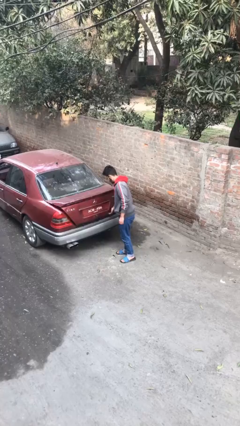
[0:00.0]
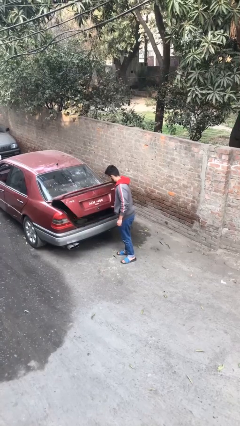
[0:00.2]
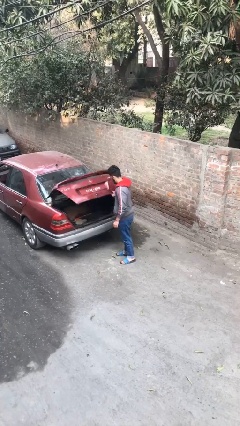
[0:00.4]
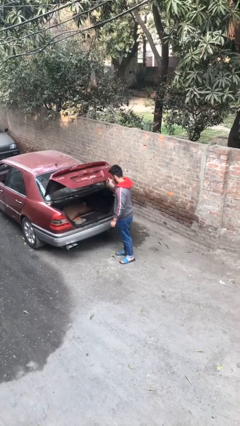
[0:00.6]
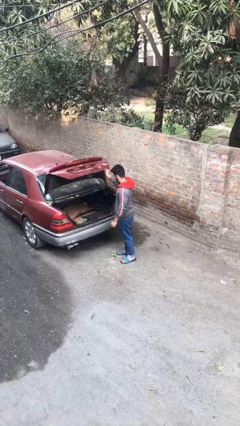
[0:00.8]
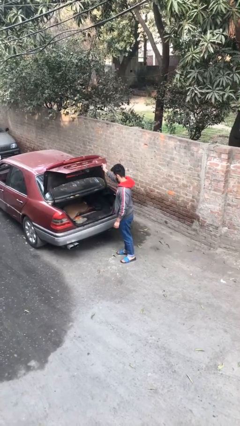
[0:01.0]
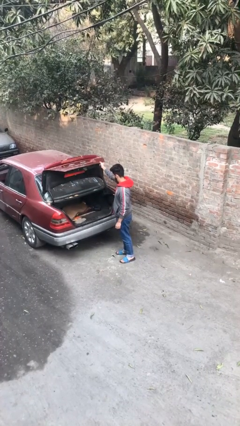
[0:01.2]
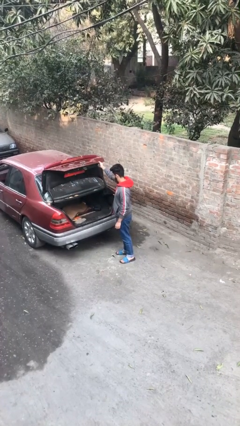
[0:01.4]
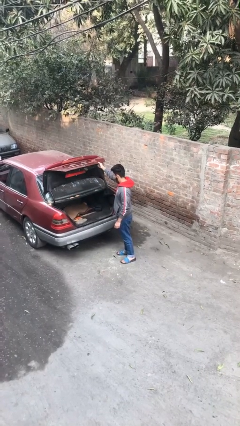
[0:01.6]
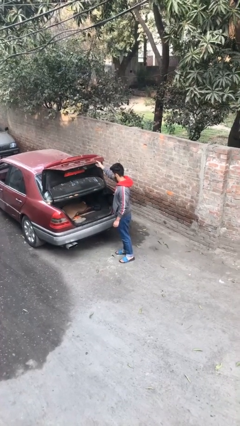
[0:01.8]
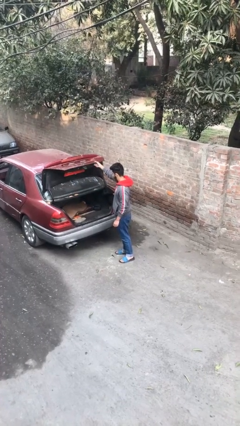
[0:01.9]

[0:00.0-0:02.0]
person opens car trunk

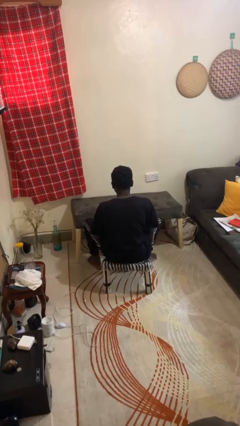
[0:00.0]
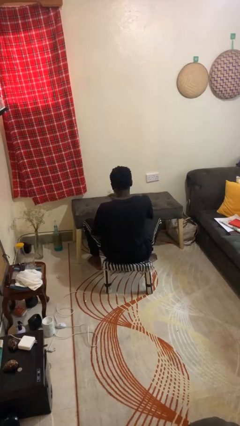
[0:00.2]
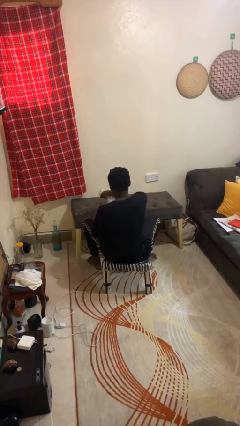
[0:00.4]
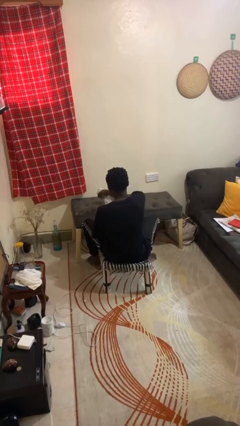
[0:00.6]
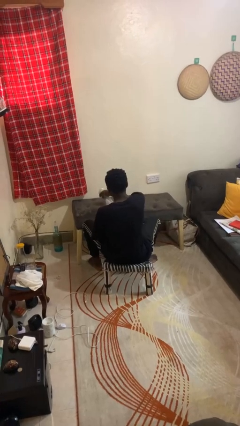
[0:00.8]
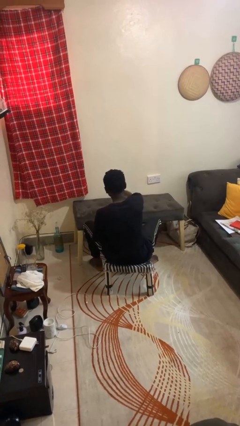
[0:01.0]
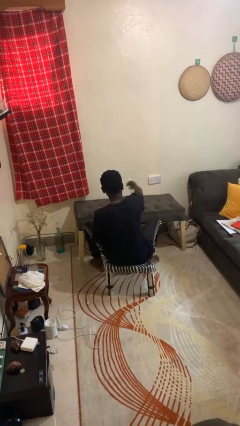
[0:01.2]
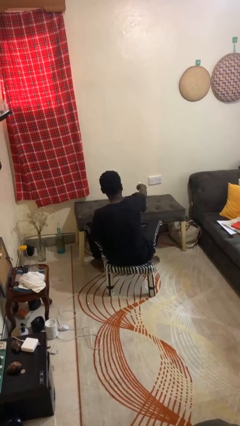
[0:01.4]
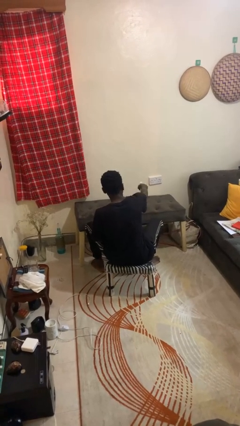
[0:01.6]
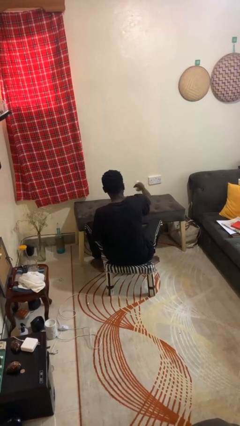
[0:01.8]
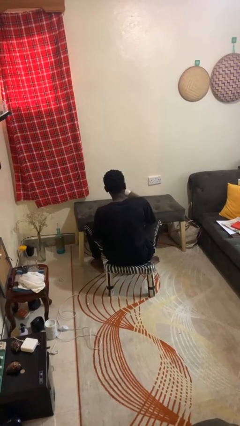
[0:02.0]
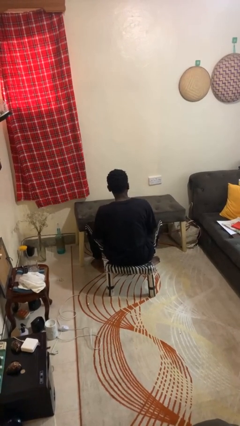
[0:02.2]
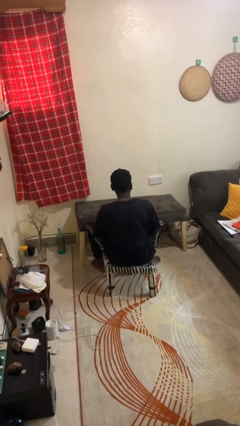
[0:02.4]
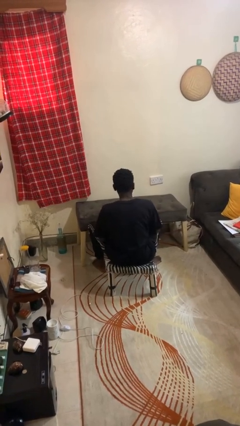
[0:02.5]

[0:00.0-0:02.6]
person sprays from bottle

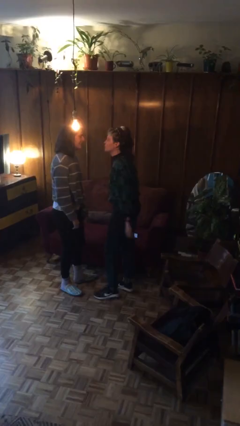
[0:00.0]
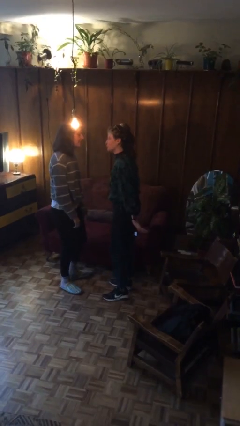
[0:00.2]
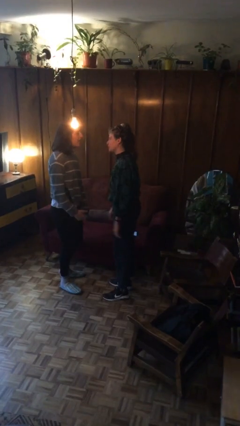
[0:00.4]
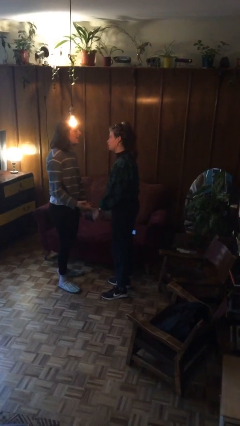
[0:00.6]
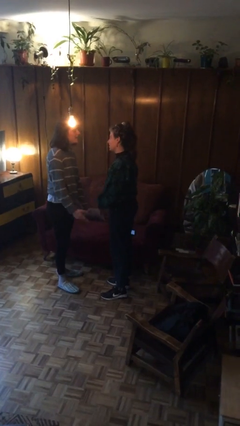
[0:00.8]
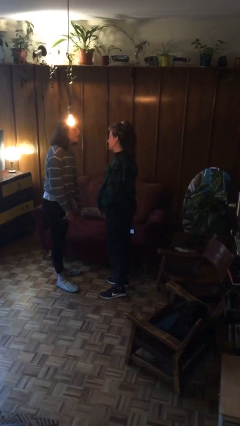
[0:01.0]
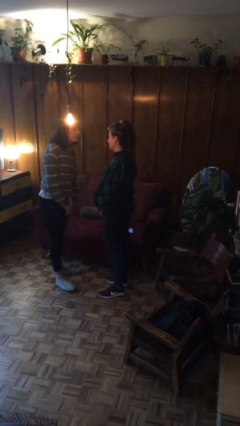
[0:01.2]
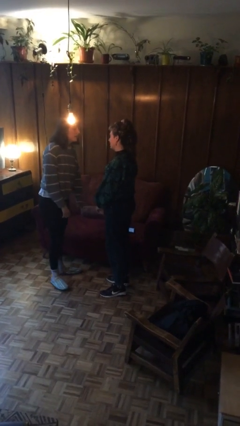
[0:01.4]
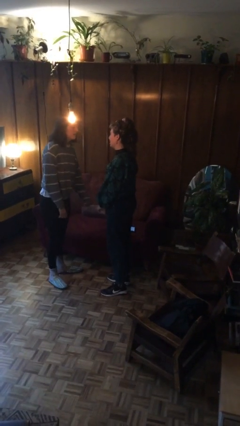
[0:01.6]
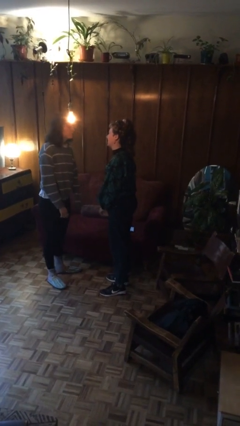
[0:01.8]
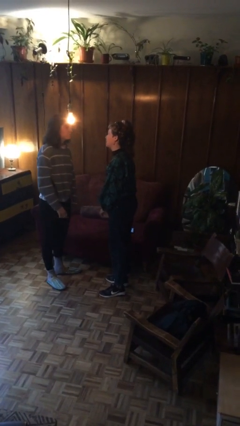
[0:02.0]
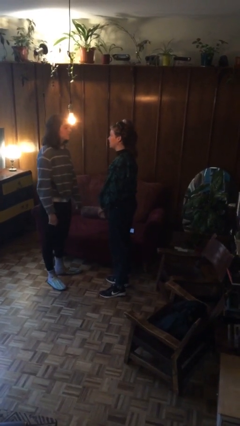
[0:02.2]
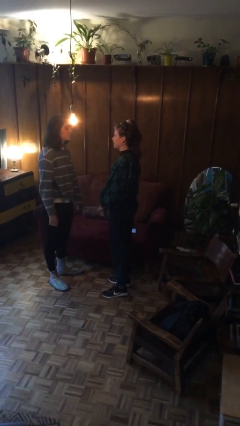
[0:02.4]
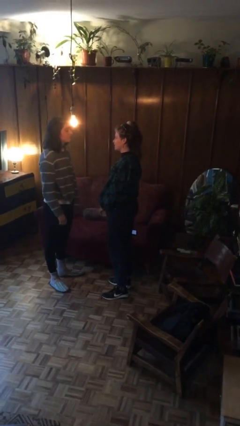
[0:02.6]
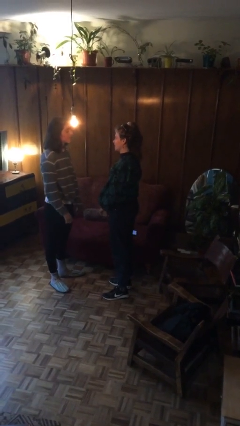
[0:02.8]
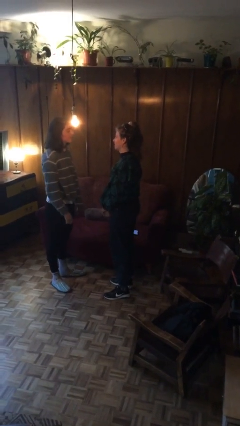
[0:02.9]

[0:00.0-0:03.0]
person talks to person

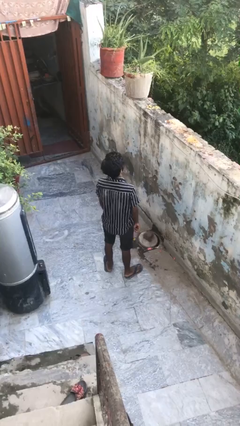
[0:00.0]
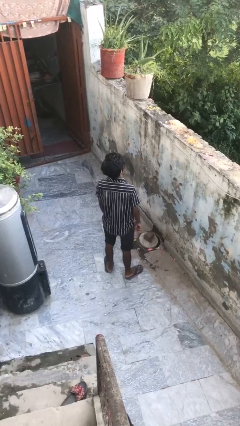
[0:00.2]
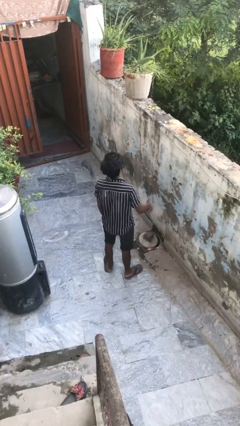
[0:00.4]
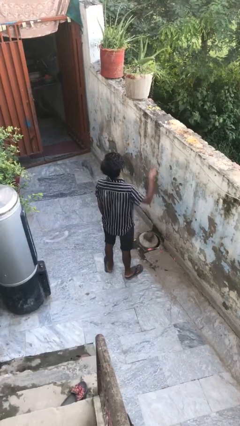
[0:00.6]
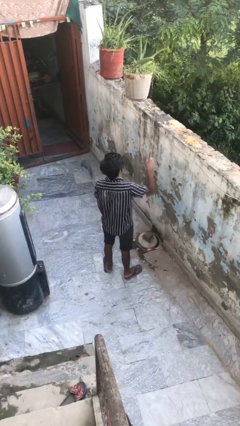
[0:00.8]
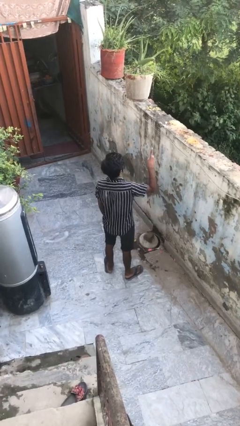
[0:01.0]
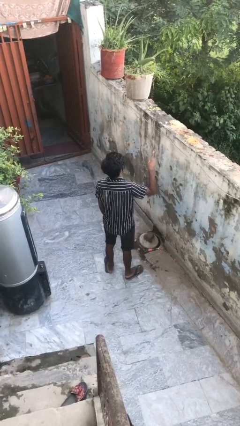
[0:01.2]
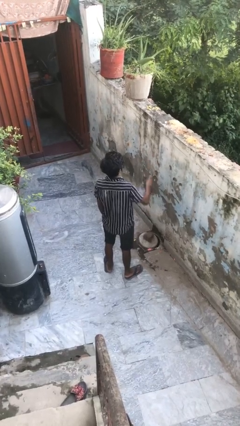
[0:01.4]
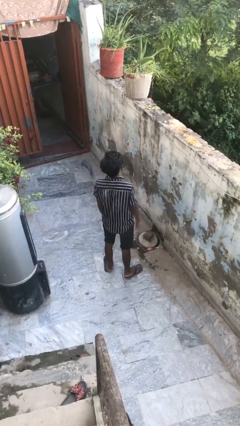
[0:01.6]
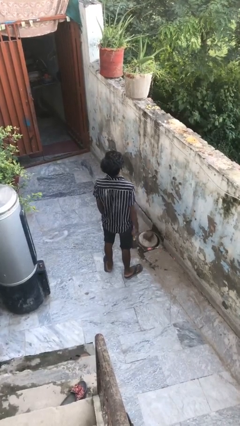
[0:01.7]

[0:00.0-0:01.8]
person gestures number one

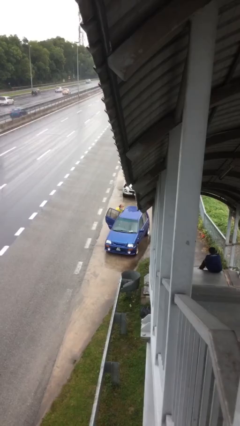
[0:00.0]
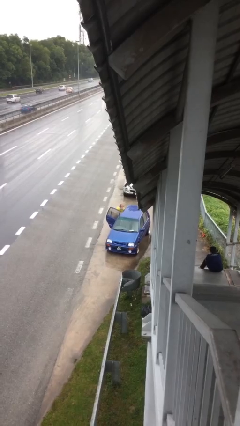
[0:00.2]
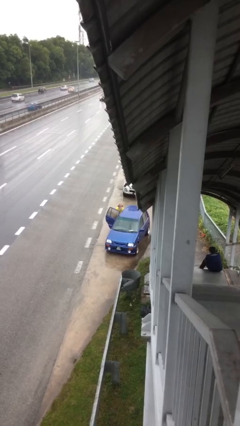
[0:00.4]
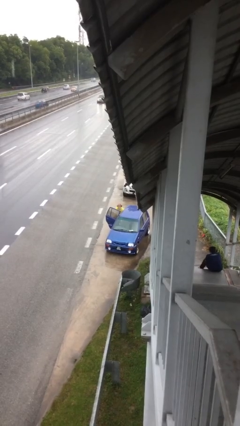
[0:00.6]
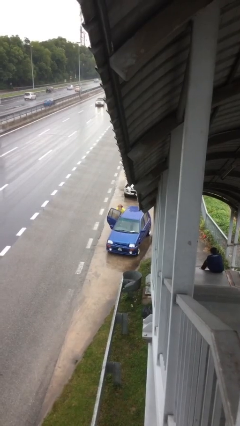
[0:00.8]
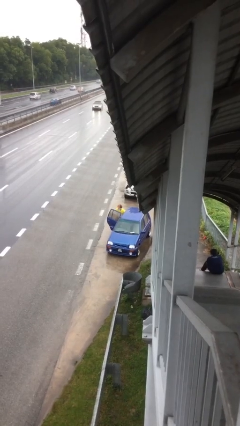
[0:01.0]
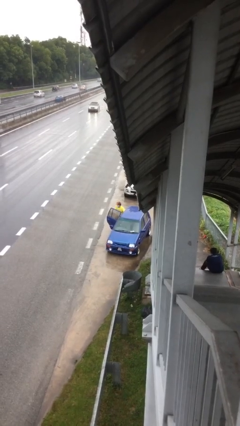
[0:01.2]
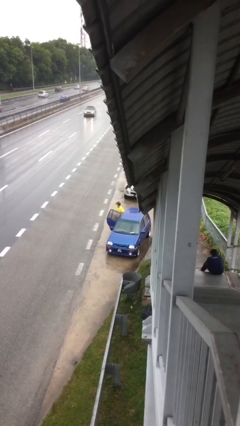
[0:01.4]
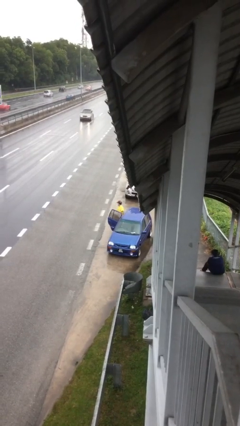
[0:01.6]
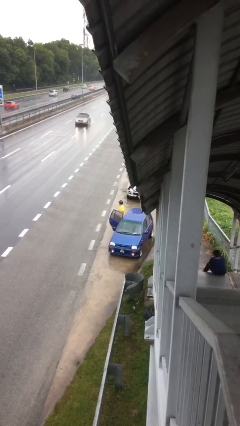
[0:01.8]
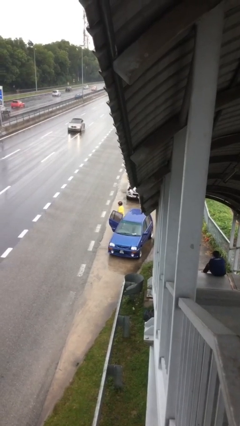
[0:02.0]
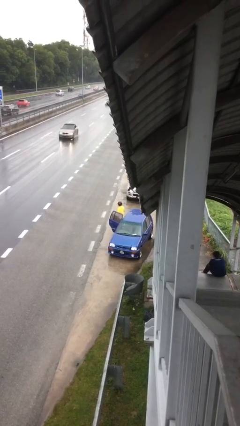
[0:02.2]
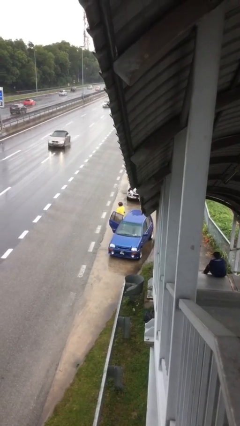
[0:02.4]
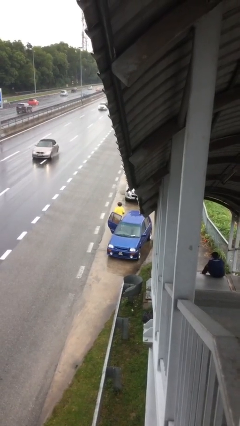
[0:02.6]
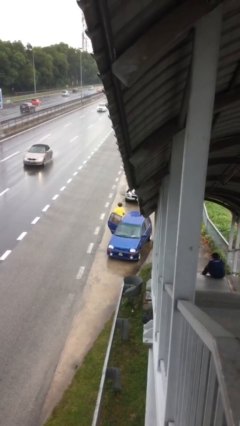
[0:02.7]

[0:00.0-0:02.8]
person unloads car

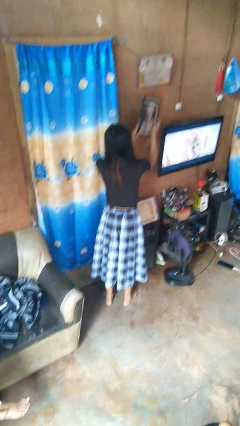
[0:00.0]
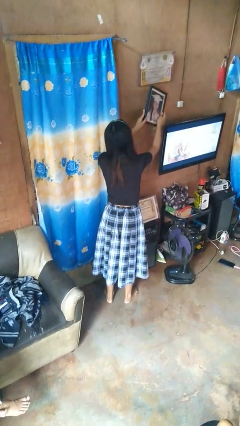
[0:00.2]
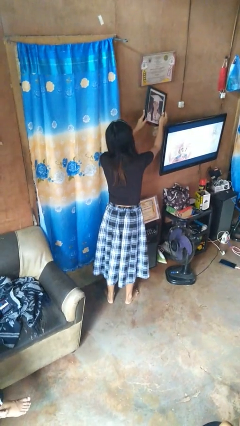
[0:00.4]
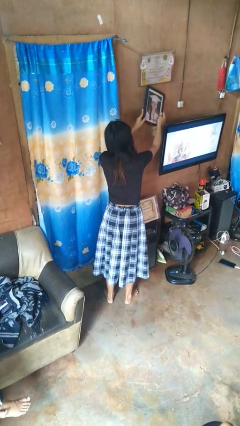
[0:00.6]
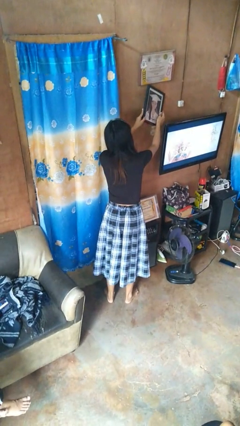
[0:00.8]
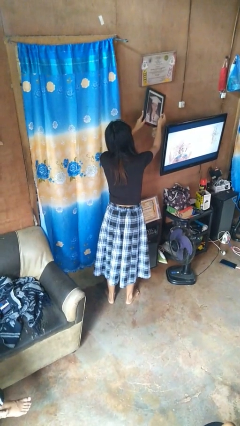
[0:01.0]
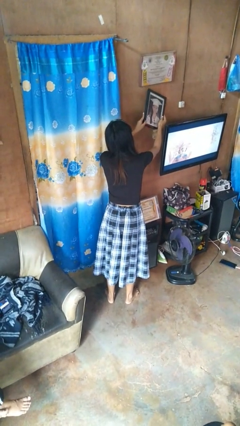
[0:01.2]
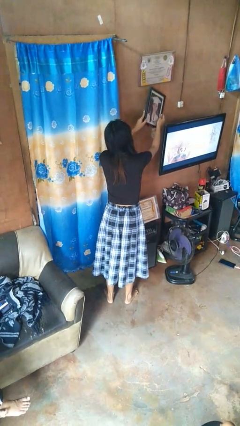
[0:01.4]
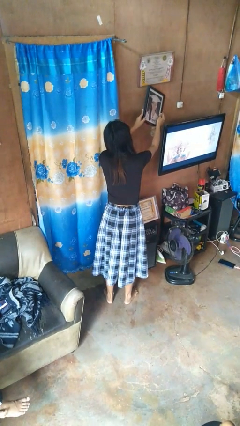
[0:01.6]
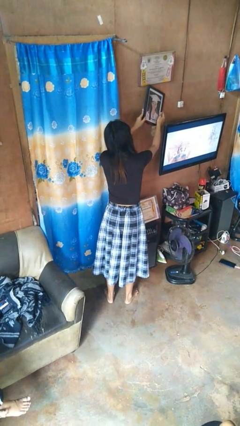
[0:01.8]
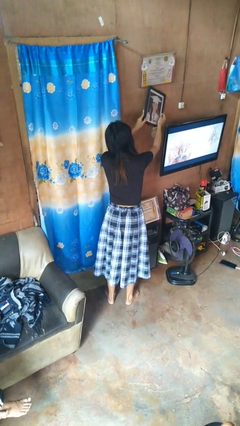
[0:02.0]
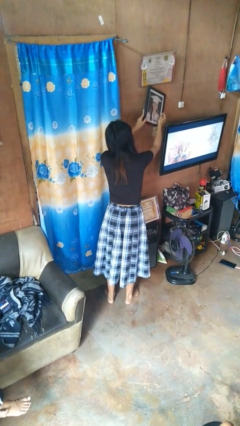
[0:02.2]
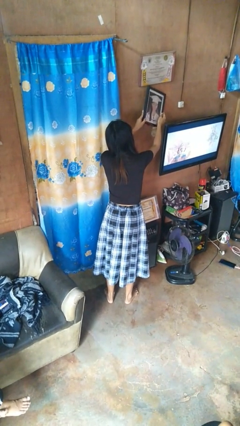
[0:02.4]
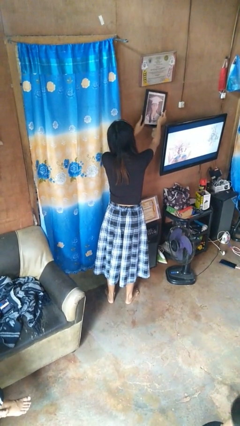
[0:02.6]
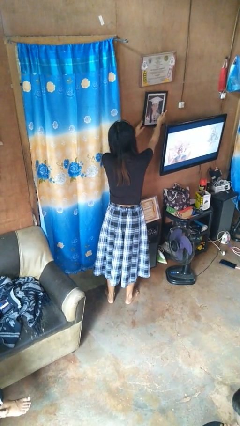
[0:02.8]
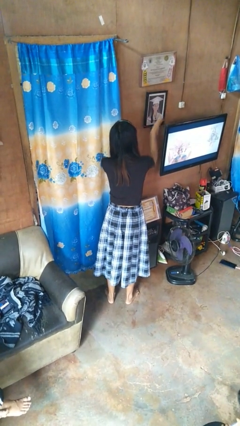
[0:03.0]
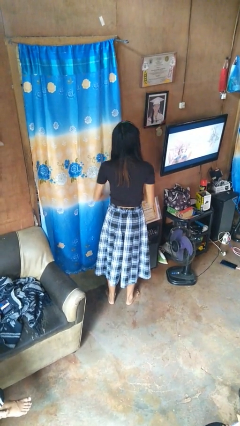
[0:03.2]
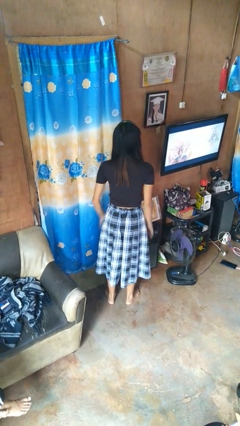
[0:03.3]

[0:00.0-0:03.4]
person puts up picture frame

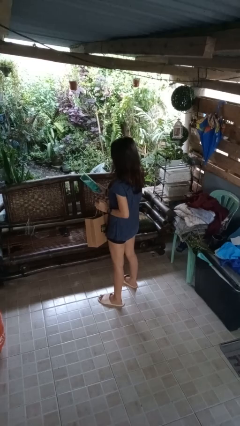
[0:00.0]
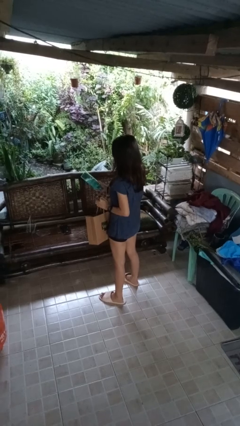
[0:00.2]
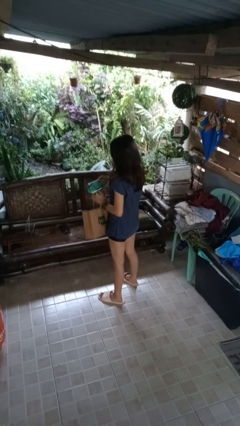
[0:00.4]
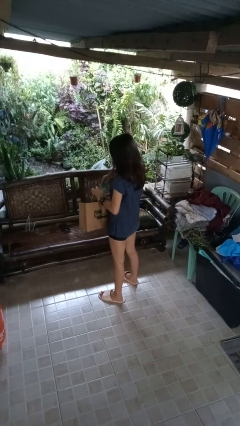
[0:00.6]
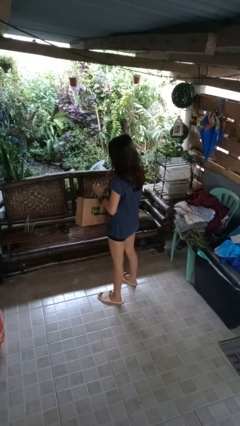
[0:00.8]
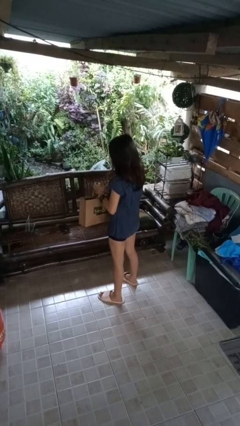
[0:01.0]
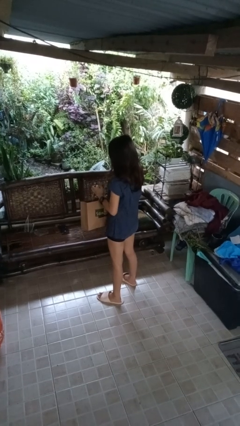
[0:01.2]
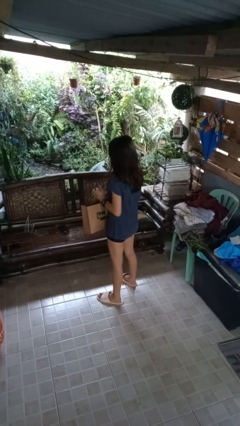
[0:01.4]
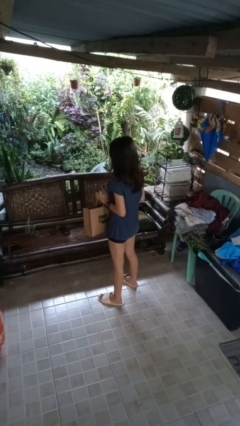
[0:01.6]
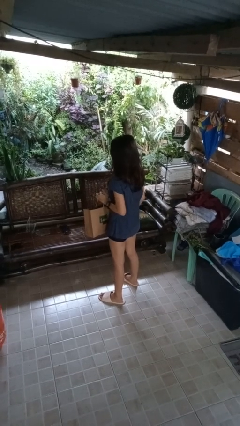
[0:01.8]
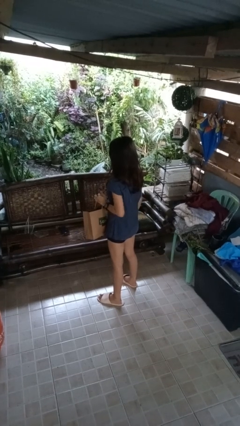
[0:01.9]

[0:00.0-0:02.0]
person puts object into bag
